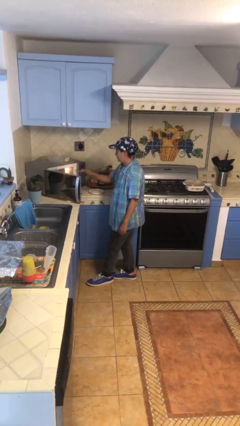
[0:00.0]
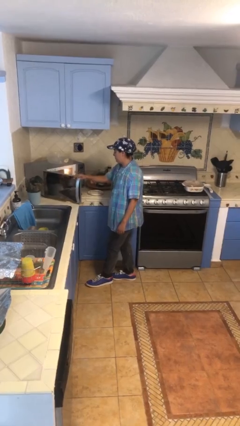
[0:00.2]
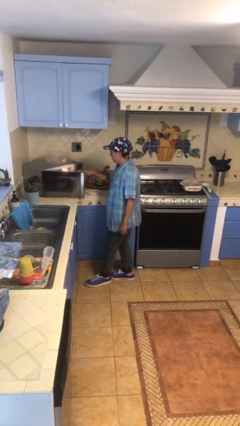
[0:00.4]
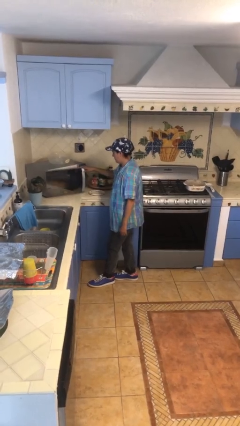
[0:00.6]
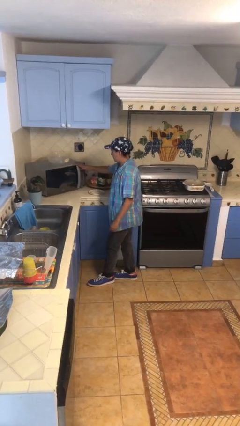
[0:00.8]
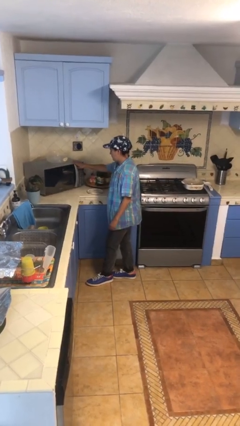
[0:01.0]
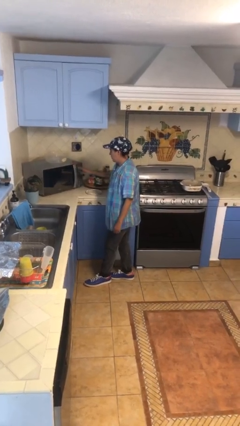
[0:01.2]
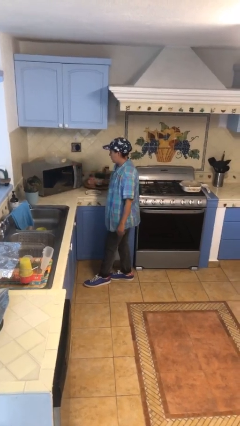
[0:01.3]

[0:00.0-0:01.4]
person closes microwave

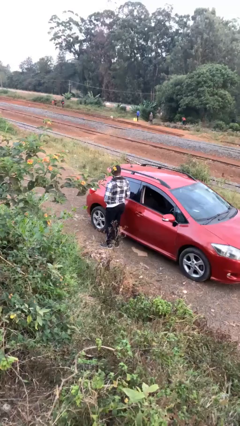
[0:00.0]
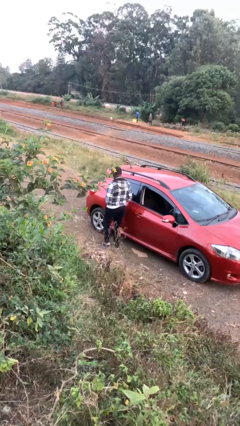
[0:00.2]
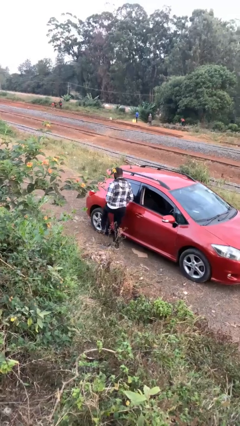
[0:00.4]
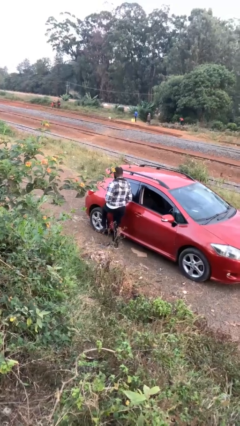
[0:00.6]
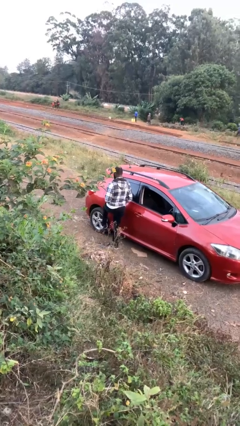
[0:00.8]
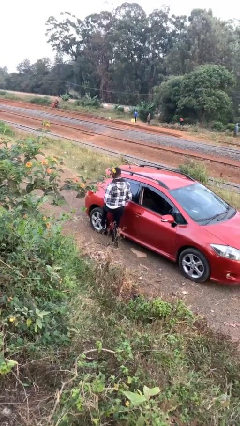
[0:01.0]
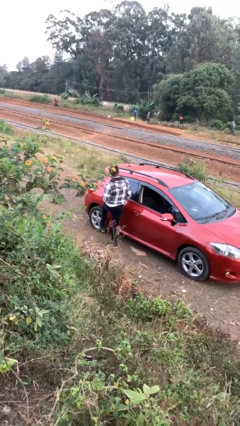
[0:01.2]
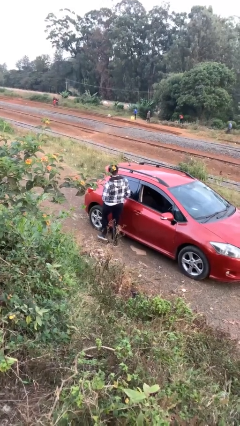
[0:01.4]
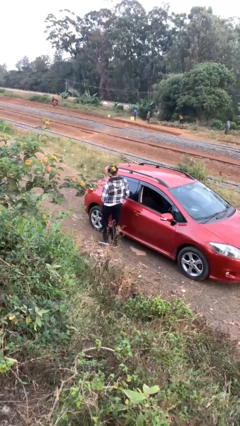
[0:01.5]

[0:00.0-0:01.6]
person kicks car tires

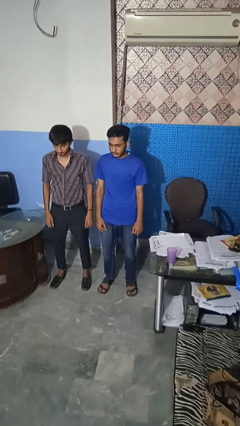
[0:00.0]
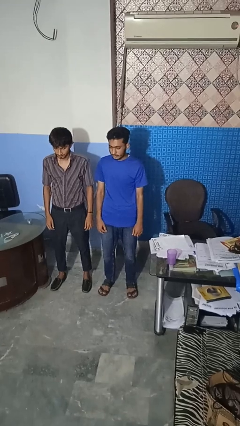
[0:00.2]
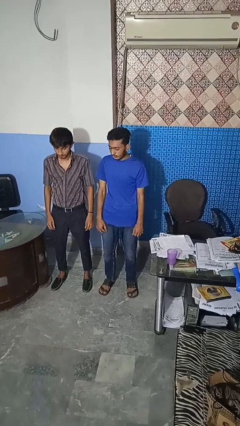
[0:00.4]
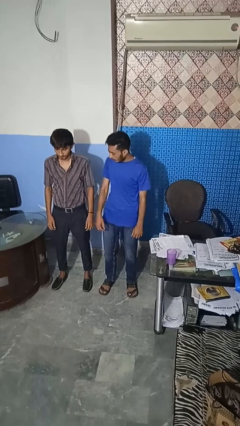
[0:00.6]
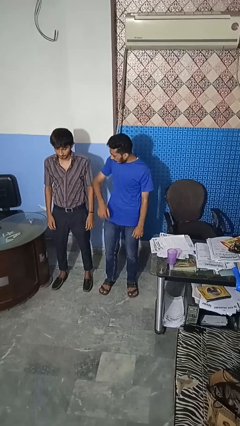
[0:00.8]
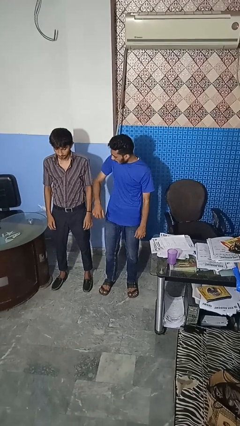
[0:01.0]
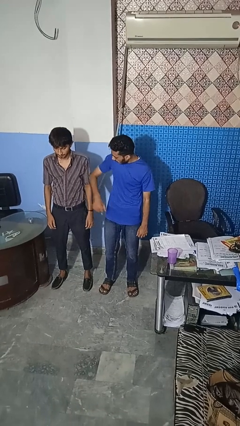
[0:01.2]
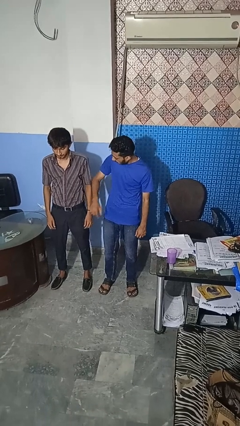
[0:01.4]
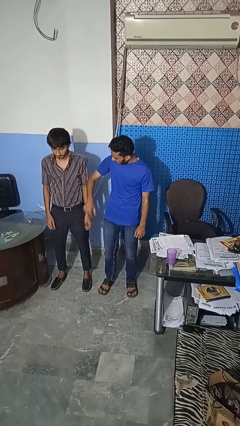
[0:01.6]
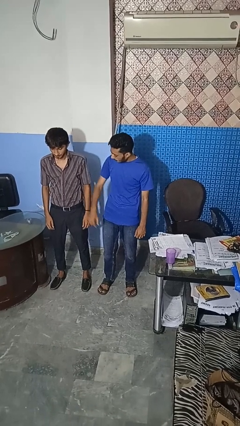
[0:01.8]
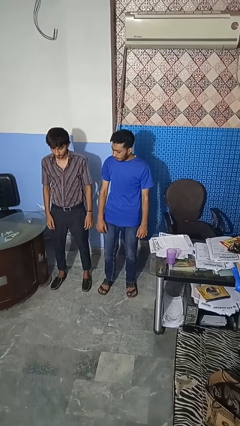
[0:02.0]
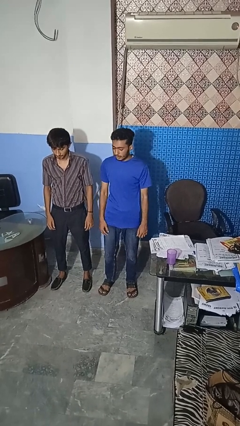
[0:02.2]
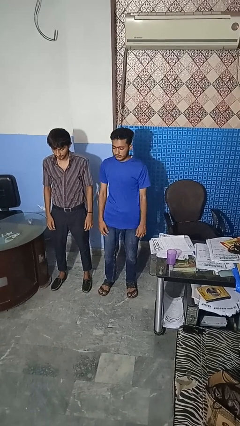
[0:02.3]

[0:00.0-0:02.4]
person nudges person with elbow

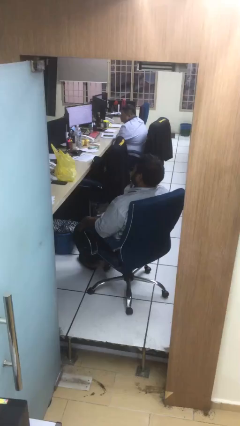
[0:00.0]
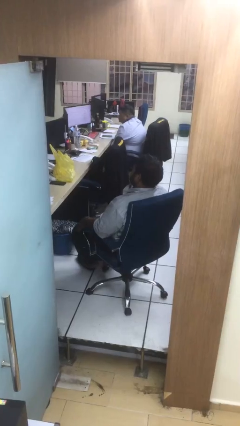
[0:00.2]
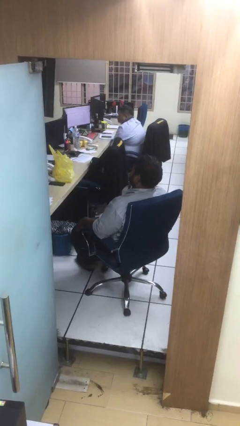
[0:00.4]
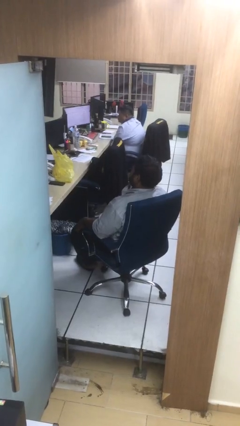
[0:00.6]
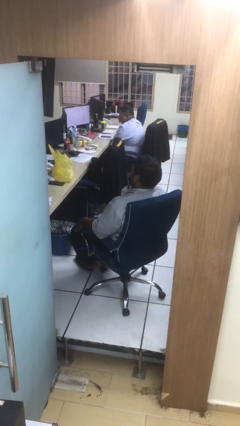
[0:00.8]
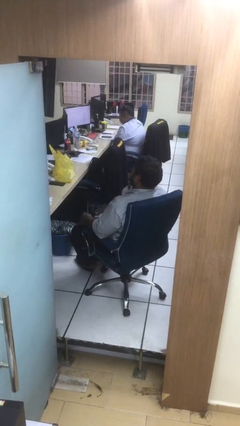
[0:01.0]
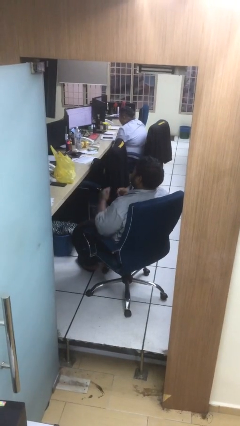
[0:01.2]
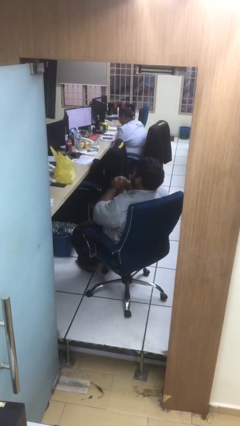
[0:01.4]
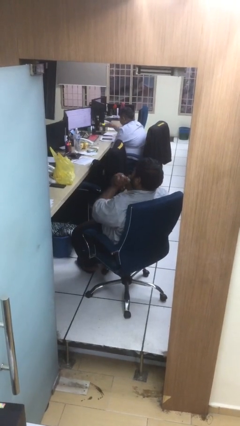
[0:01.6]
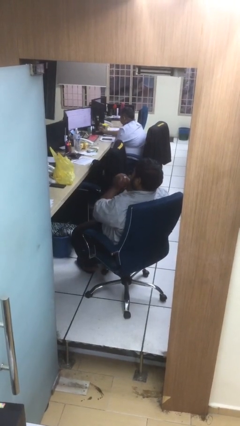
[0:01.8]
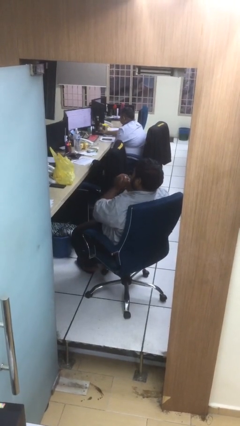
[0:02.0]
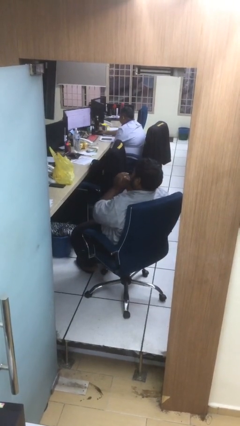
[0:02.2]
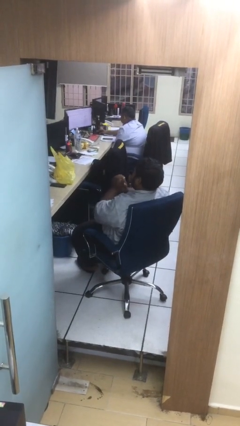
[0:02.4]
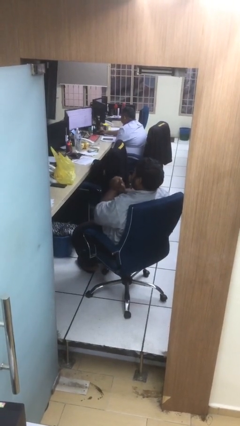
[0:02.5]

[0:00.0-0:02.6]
person cracks knuckles

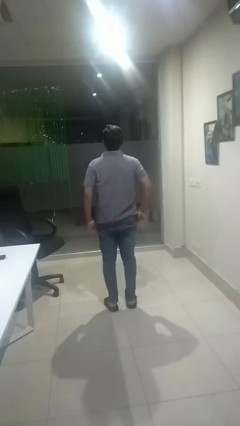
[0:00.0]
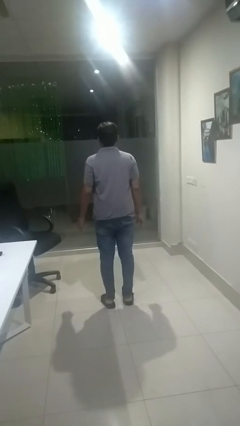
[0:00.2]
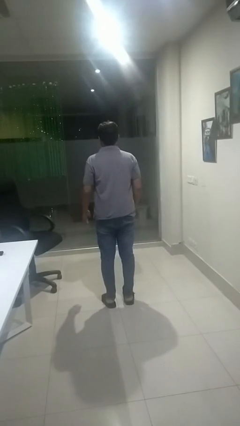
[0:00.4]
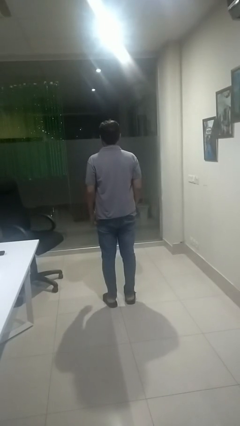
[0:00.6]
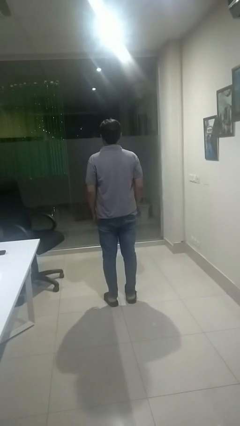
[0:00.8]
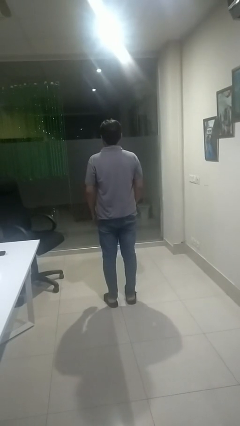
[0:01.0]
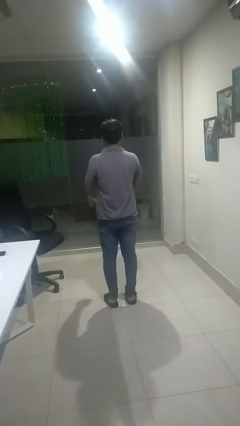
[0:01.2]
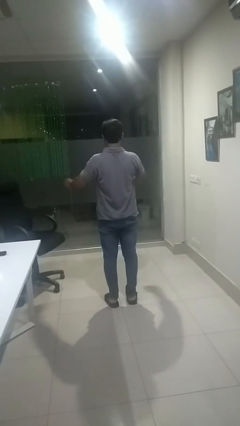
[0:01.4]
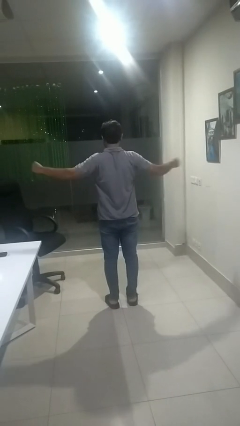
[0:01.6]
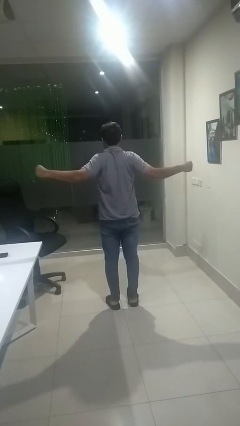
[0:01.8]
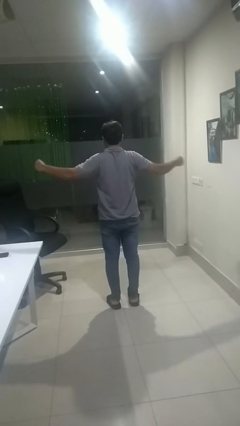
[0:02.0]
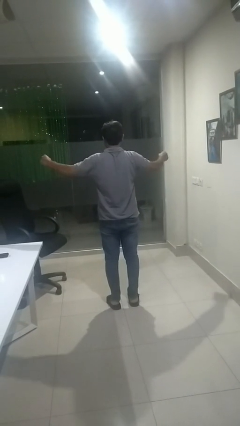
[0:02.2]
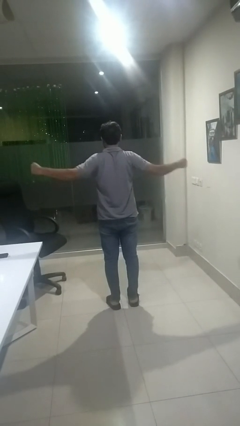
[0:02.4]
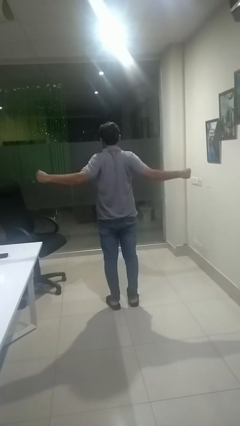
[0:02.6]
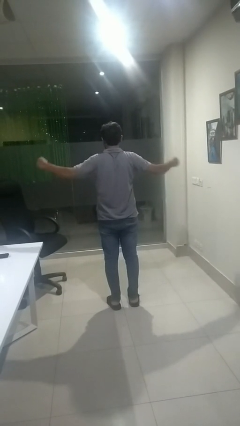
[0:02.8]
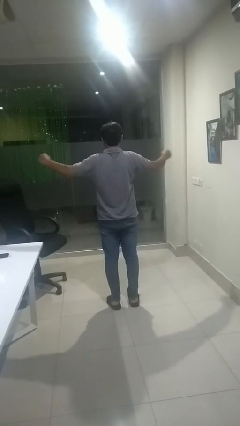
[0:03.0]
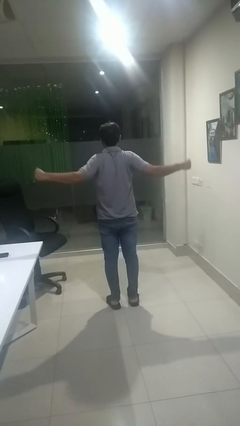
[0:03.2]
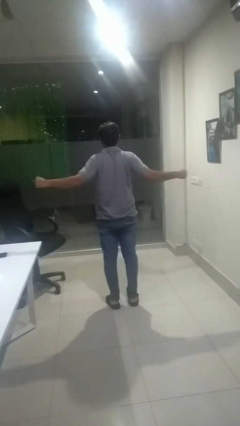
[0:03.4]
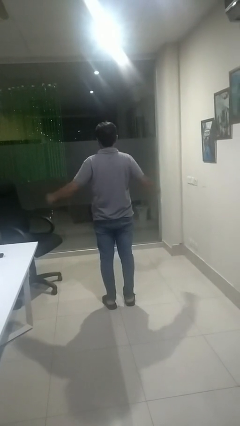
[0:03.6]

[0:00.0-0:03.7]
person stretches arms to side

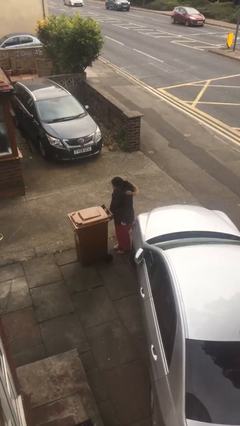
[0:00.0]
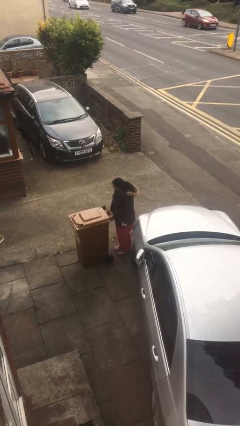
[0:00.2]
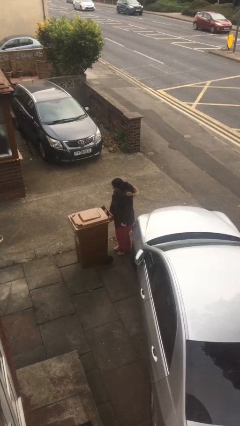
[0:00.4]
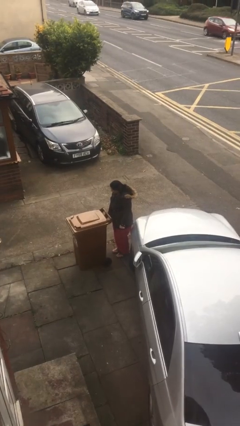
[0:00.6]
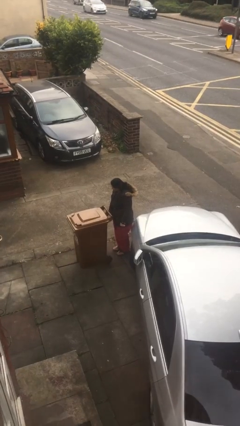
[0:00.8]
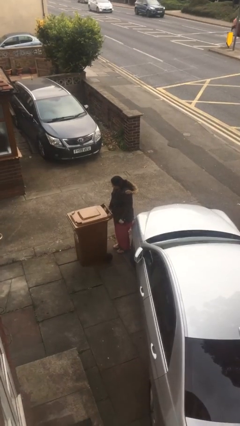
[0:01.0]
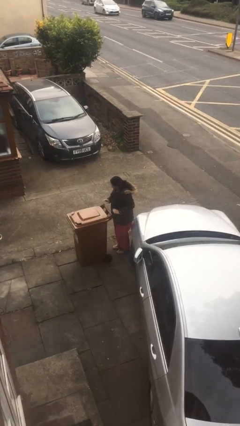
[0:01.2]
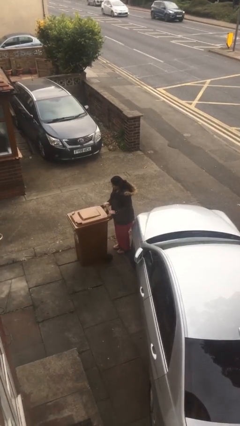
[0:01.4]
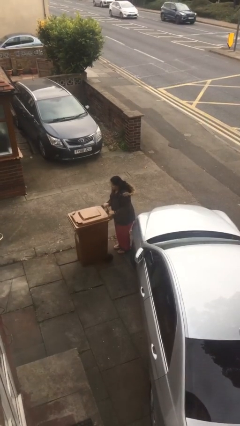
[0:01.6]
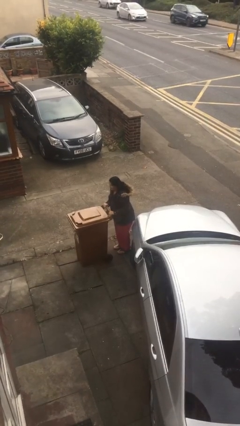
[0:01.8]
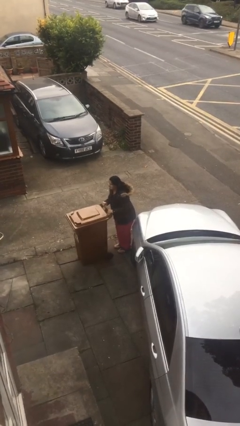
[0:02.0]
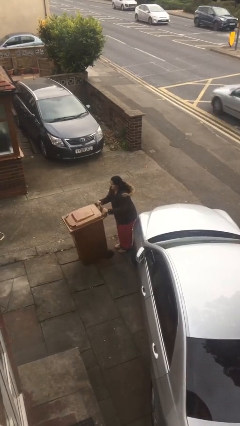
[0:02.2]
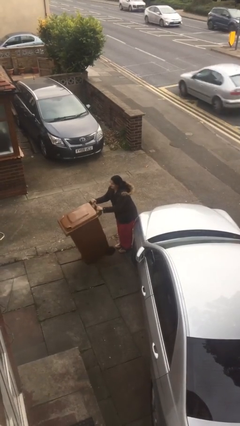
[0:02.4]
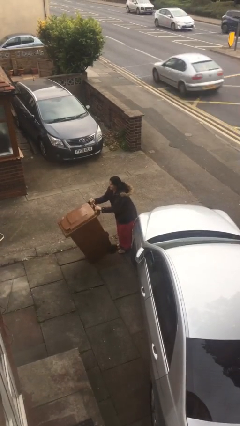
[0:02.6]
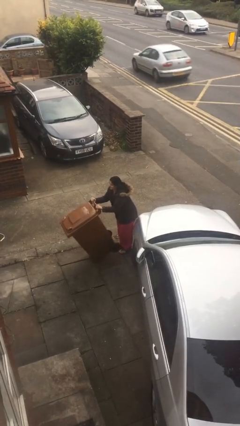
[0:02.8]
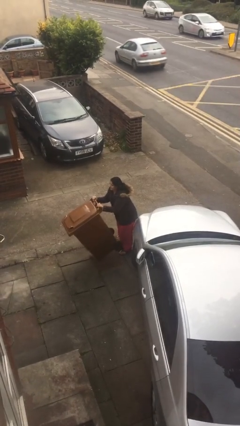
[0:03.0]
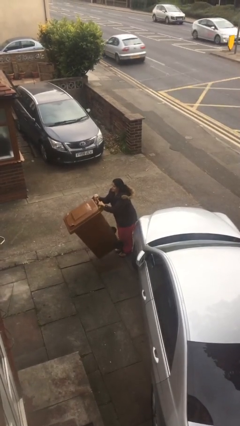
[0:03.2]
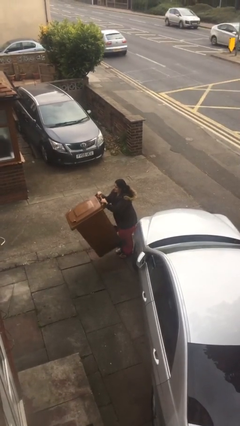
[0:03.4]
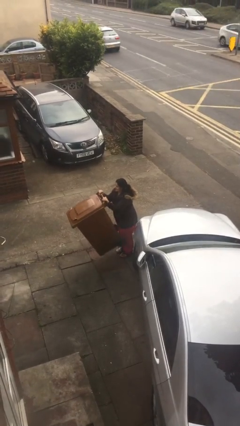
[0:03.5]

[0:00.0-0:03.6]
person picks up object from floor

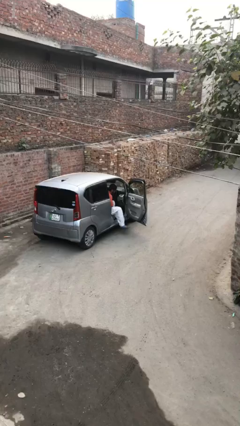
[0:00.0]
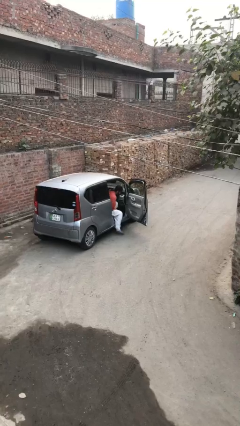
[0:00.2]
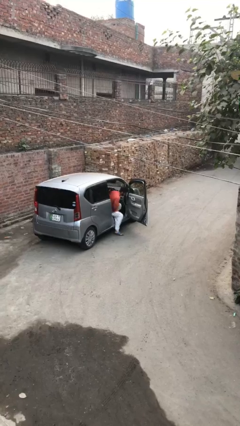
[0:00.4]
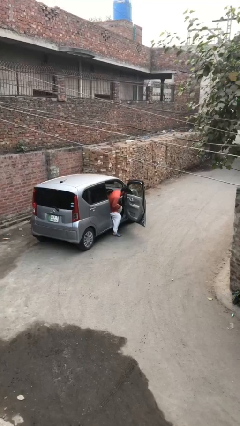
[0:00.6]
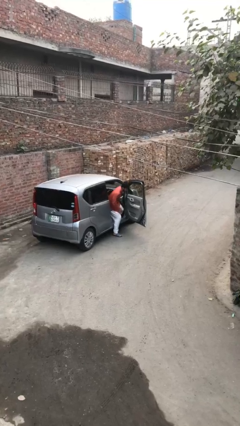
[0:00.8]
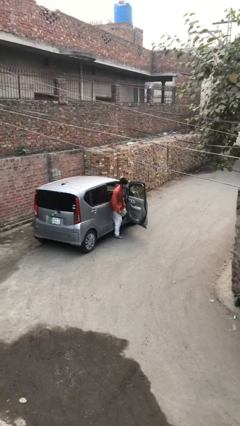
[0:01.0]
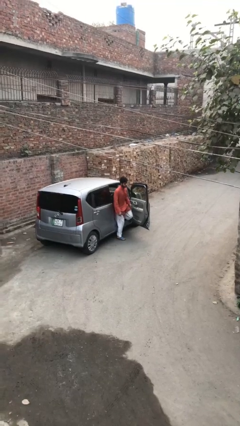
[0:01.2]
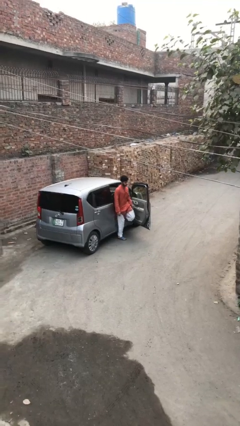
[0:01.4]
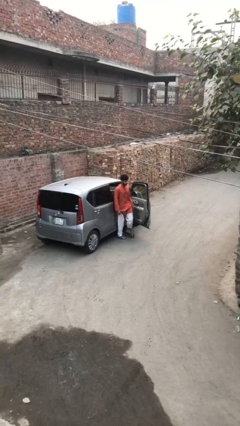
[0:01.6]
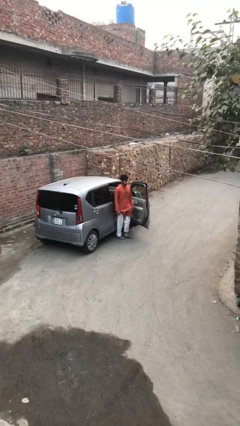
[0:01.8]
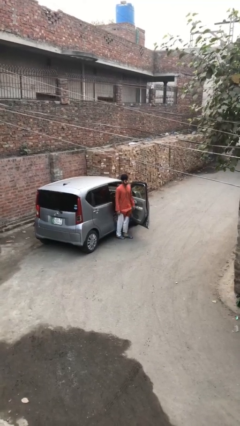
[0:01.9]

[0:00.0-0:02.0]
person exits car
